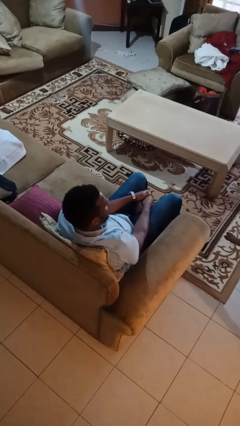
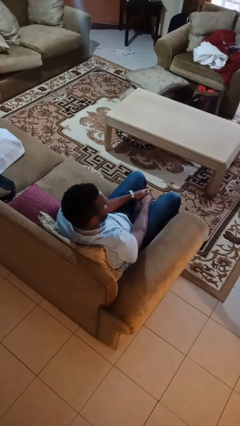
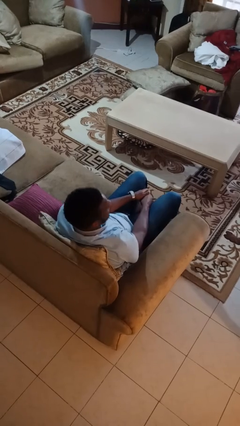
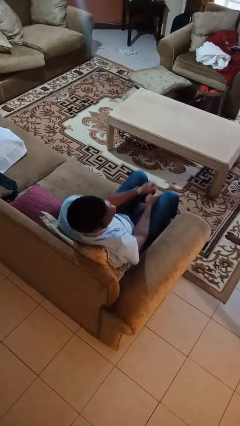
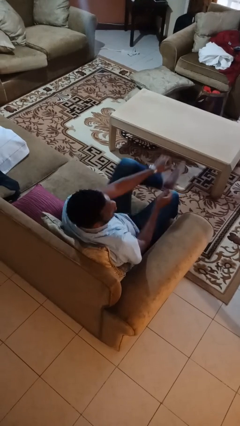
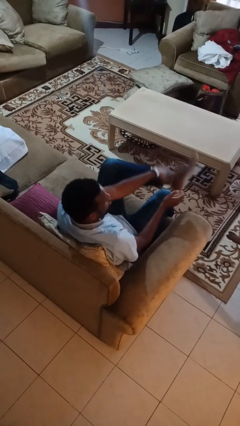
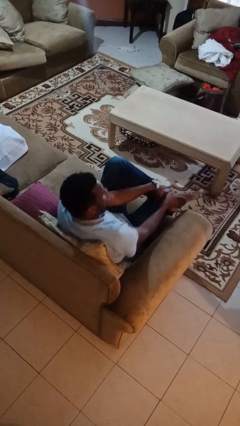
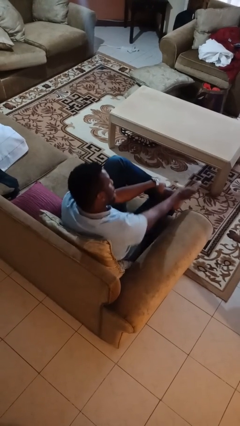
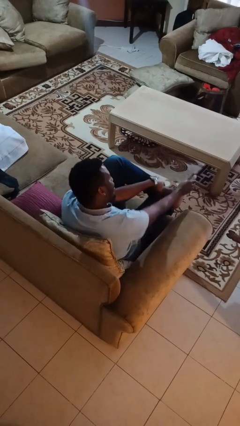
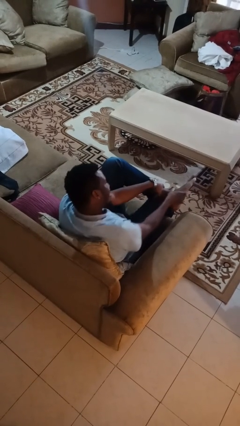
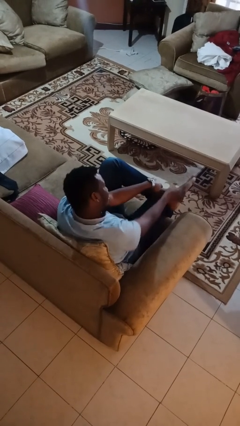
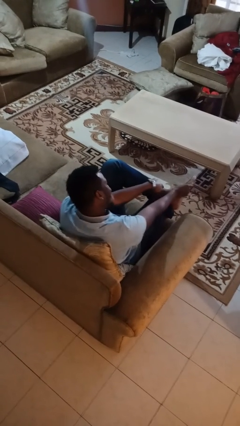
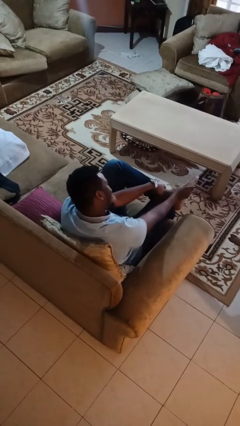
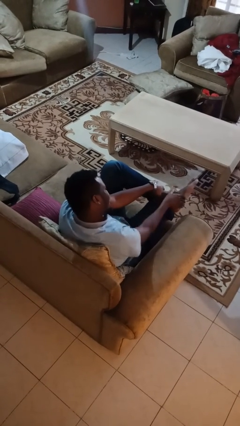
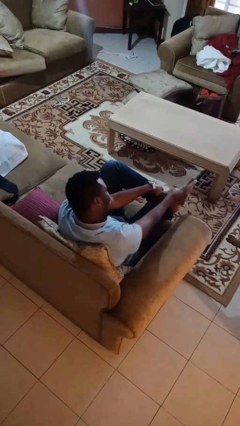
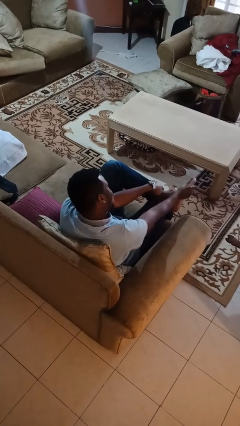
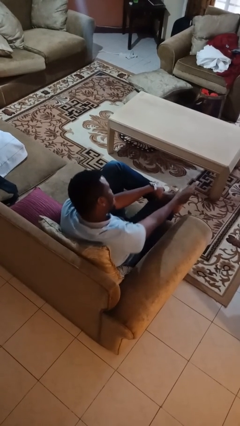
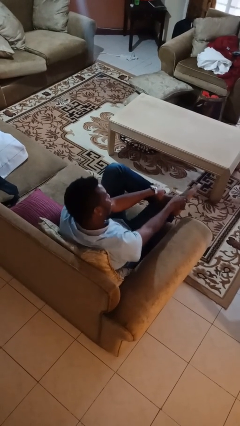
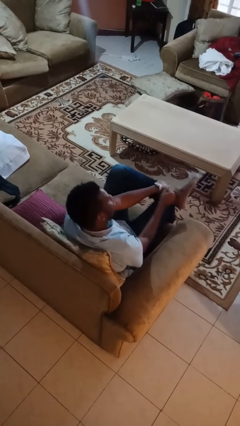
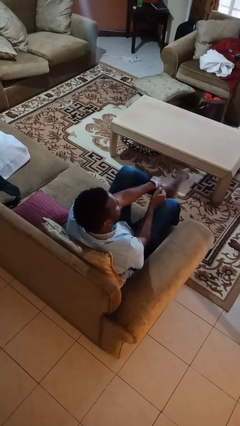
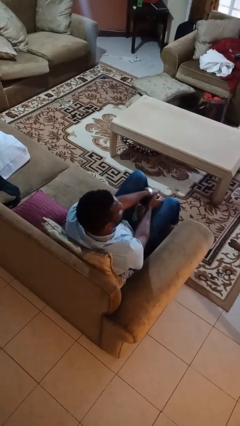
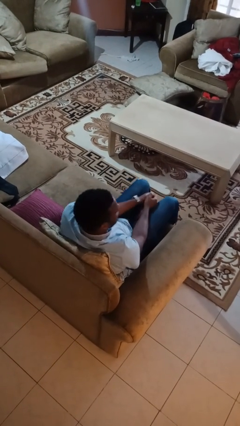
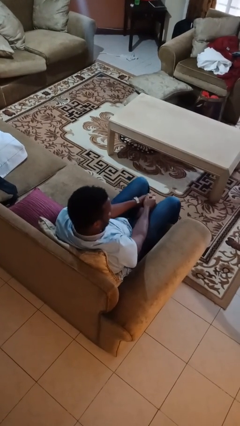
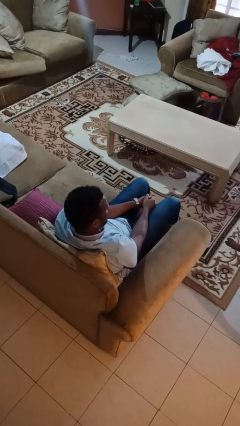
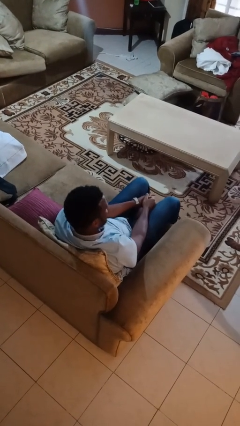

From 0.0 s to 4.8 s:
person rubs foot

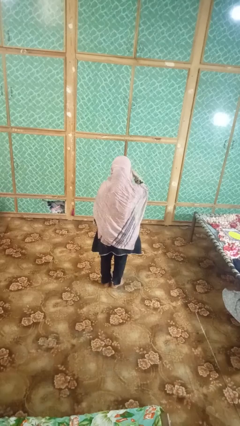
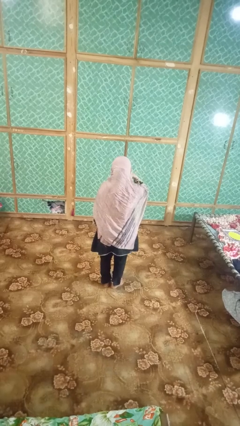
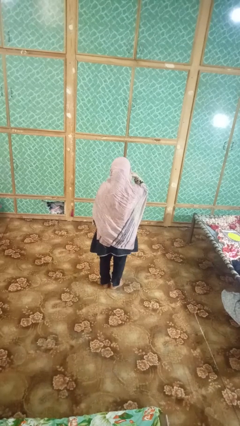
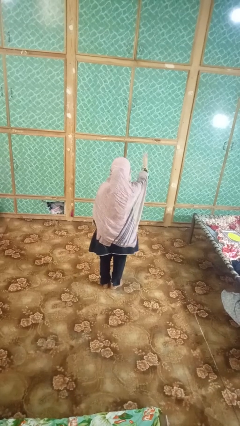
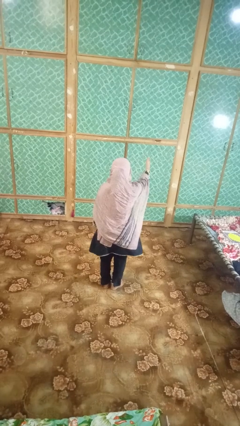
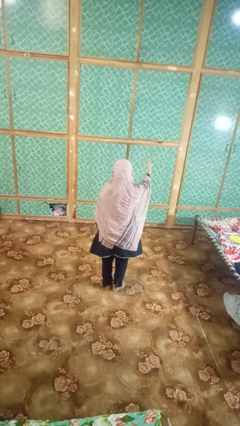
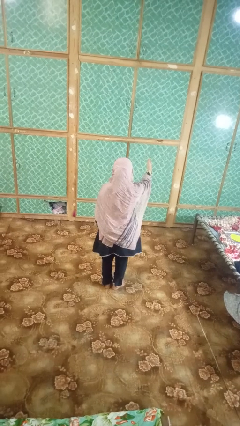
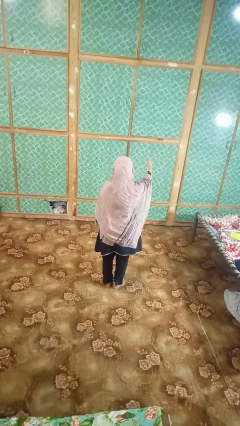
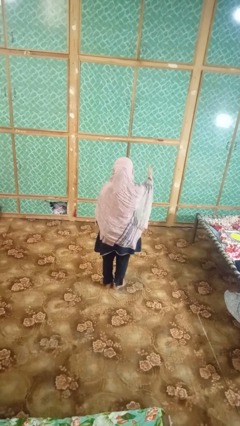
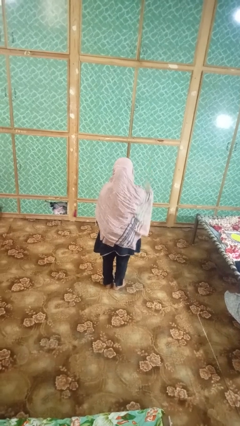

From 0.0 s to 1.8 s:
person gestures blow kiss

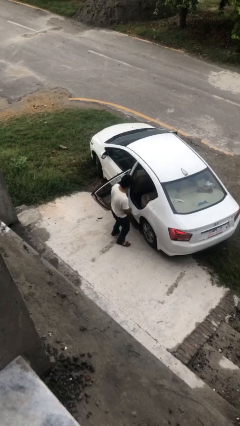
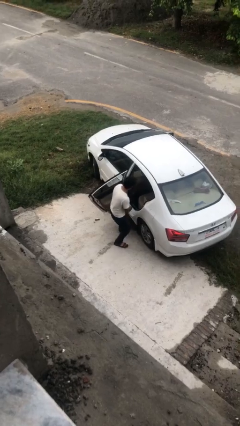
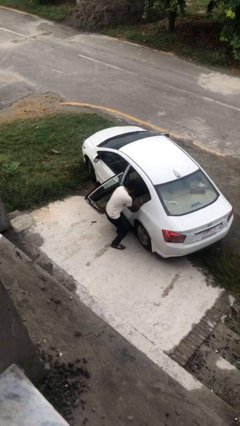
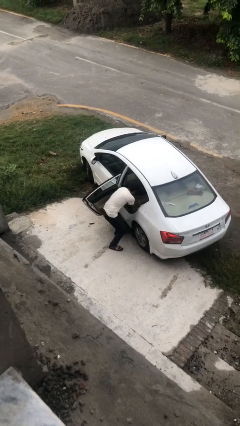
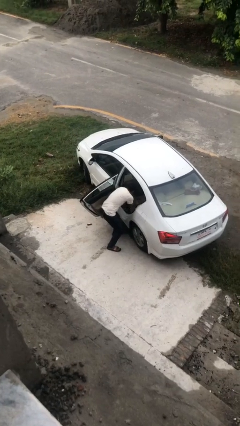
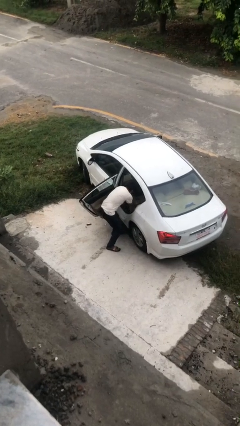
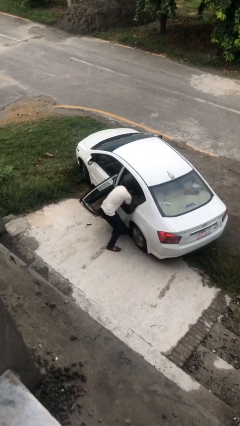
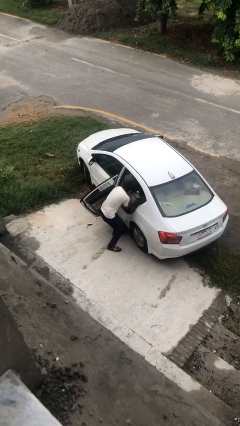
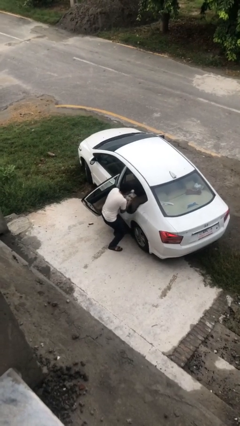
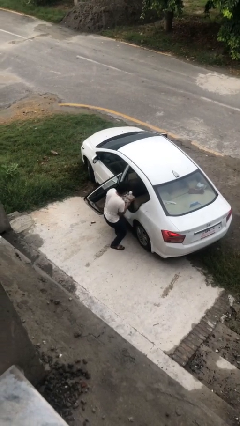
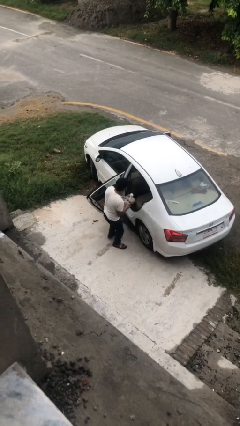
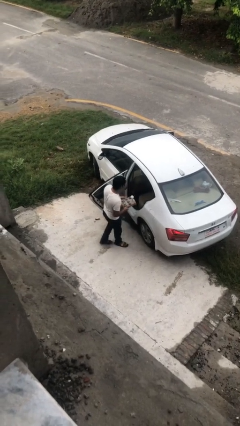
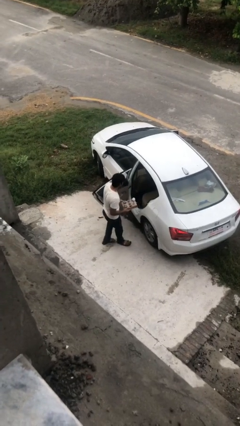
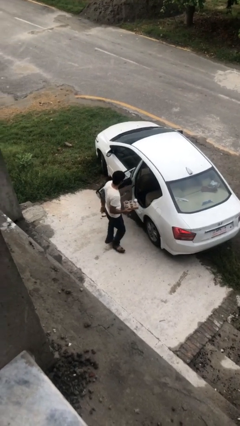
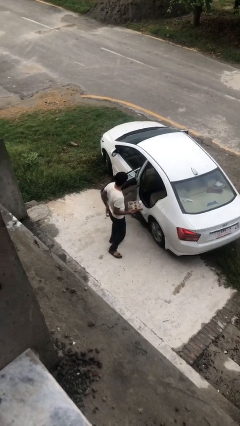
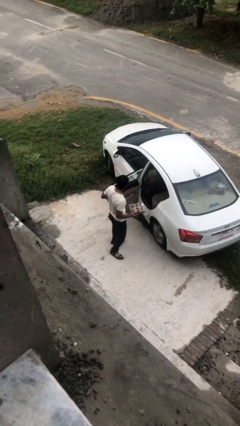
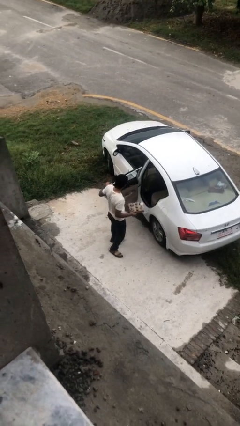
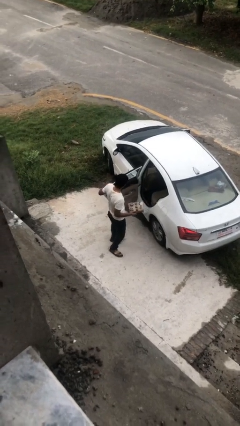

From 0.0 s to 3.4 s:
person unloads car

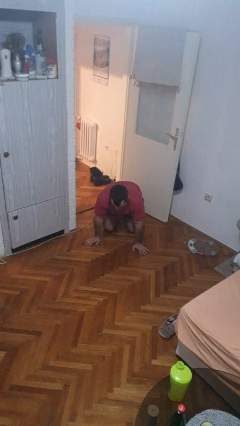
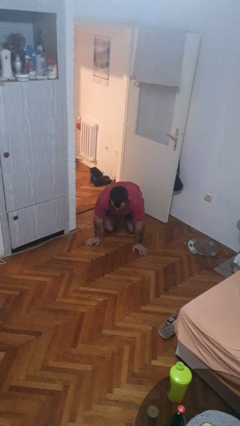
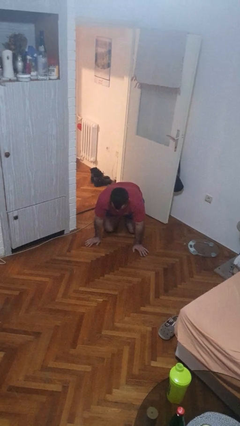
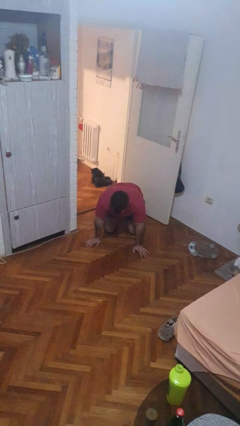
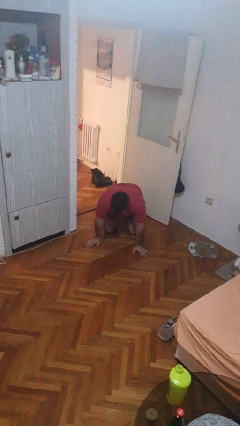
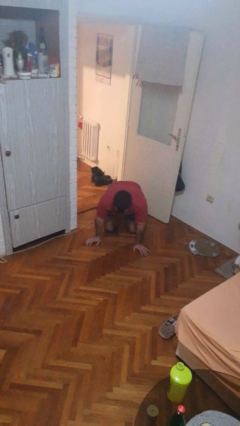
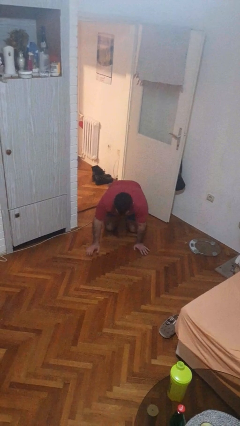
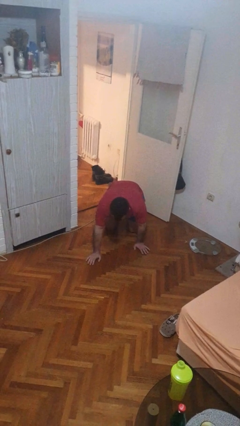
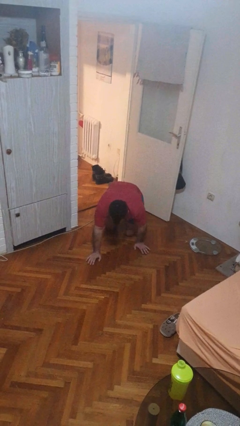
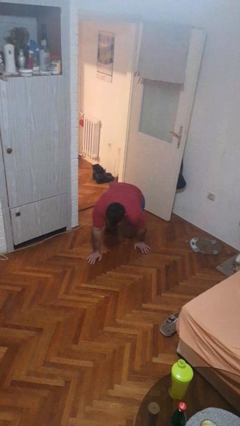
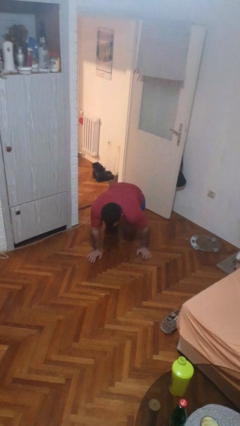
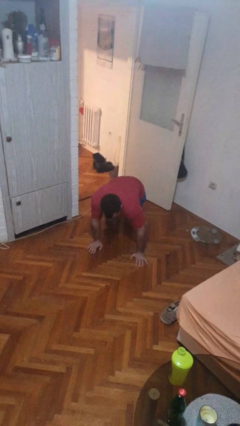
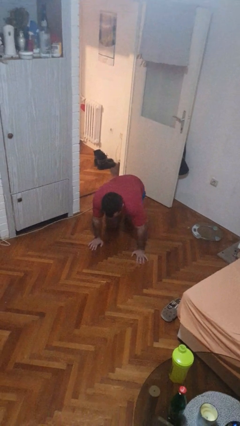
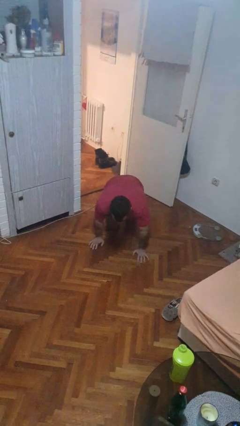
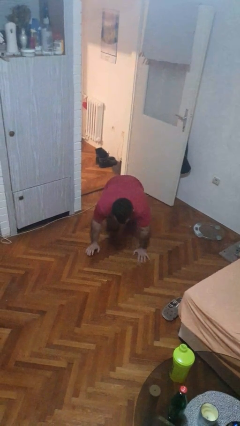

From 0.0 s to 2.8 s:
person crawls

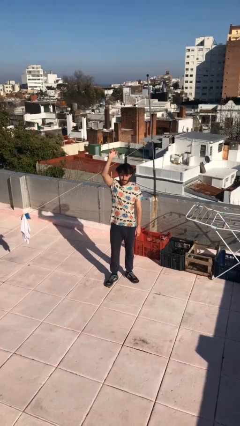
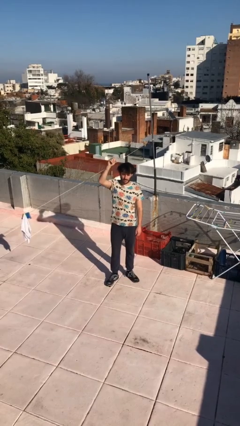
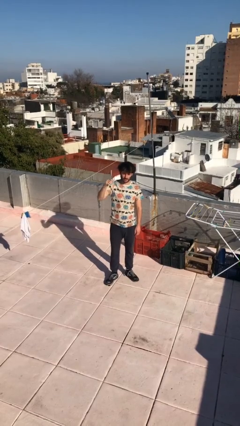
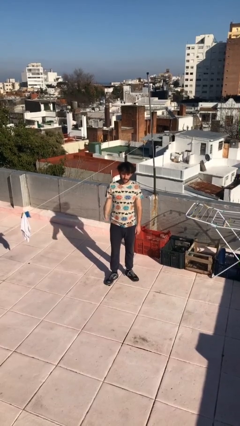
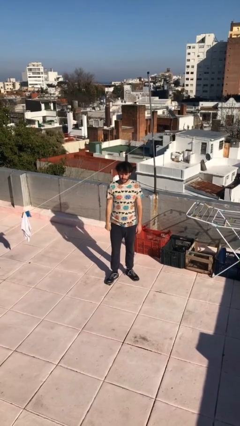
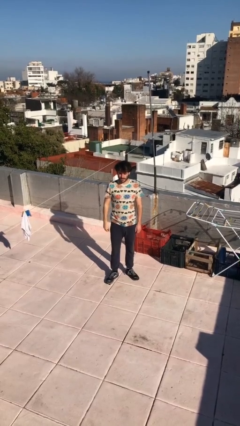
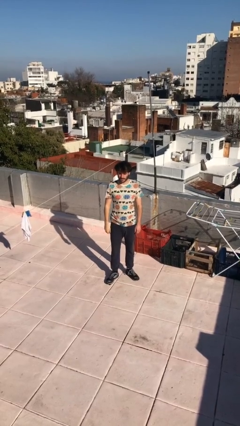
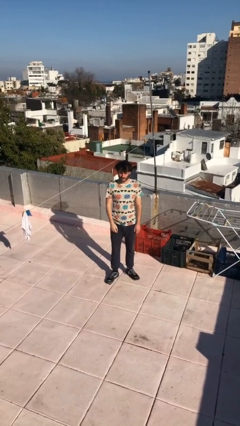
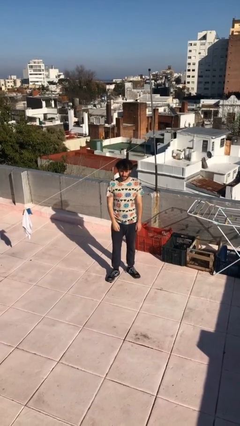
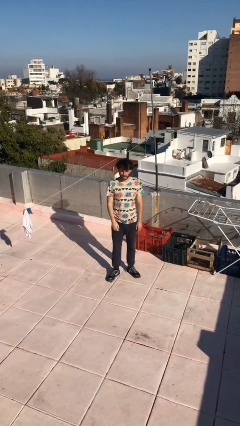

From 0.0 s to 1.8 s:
person gestures lower hand

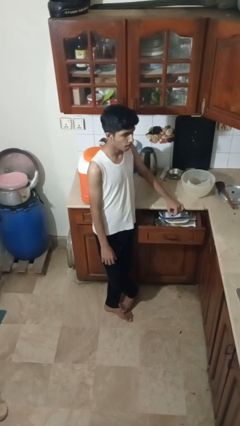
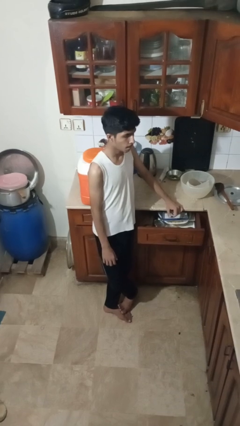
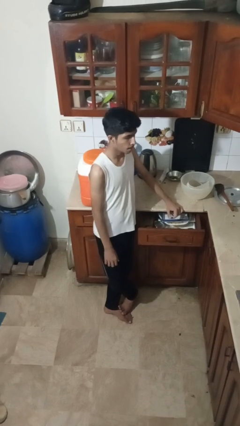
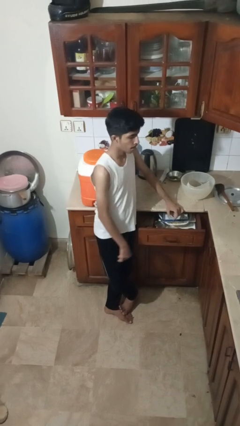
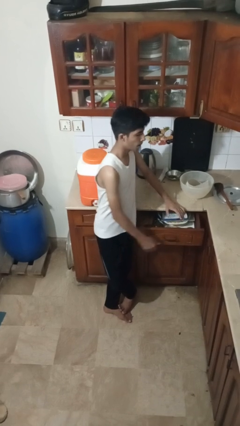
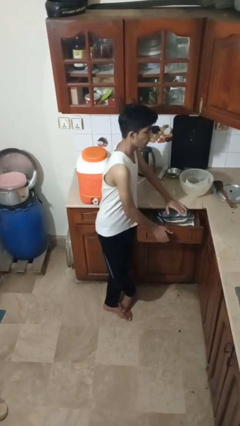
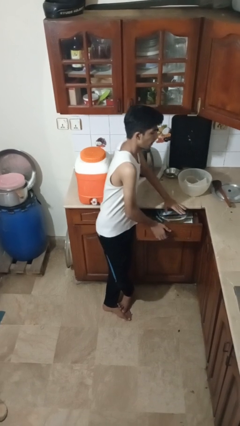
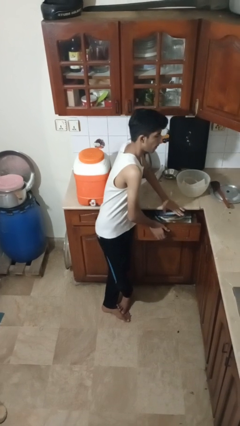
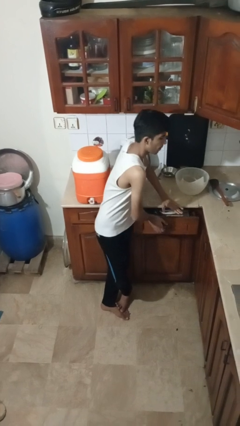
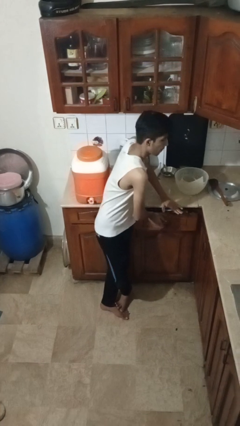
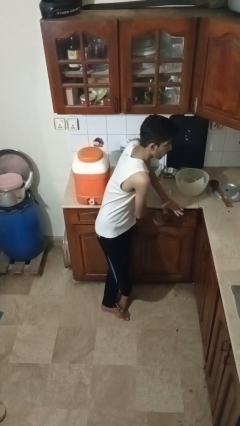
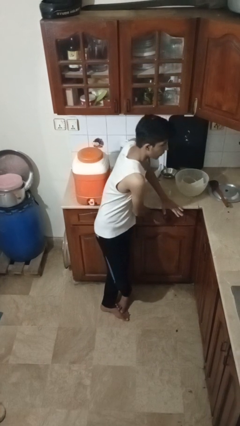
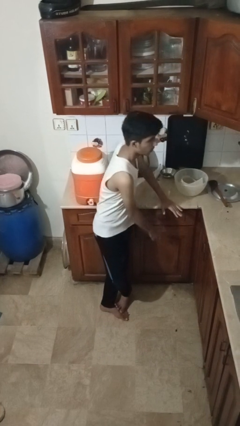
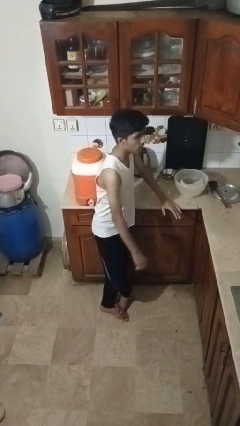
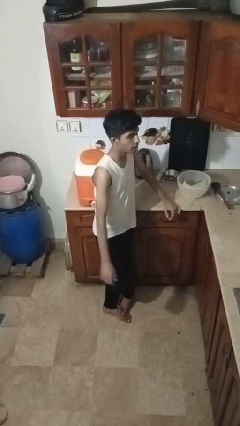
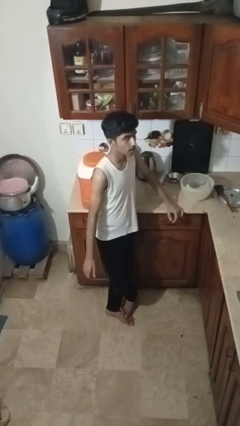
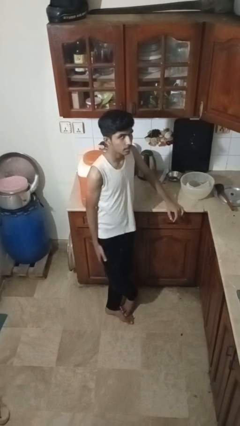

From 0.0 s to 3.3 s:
person closes kitchen drawer
